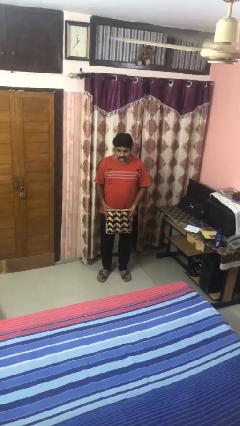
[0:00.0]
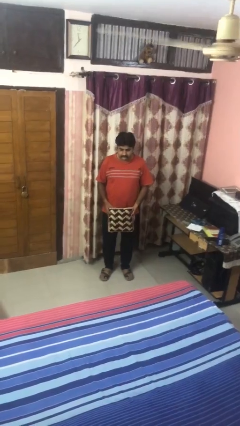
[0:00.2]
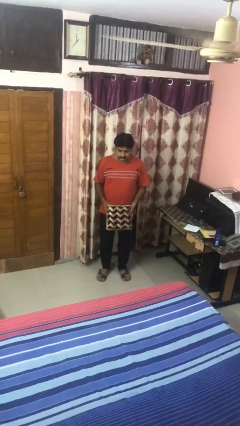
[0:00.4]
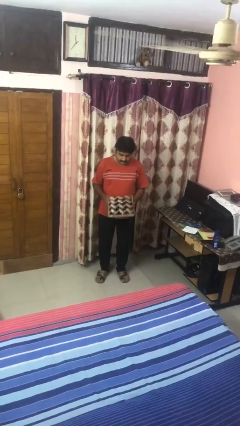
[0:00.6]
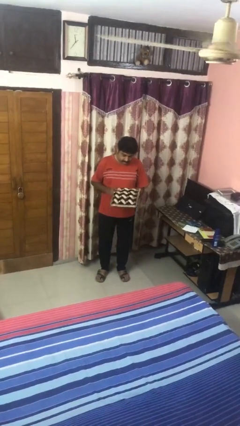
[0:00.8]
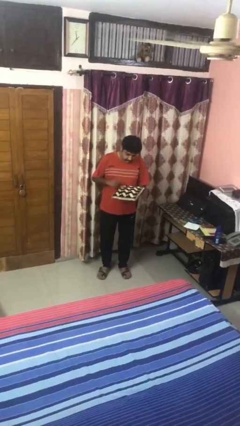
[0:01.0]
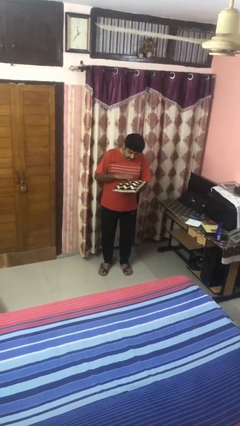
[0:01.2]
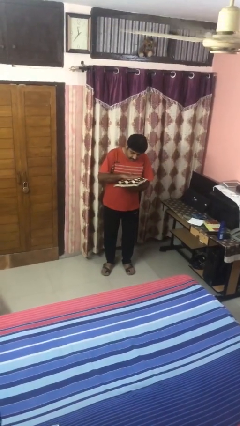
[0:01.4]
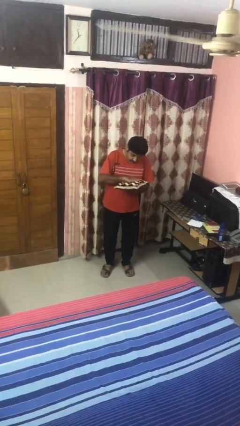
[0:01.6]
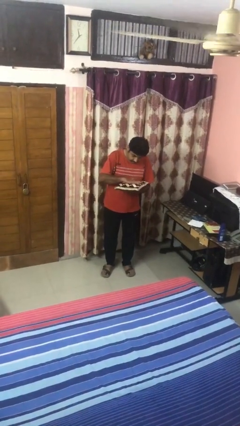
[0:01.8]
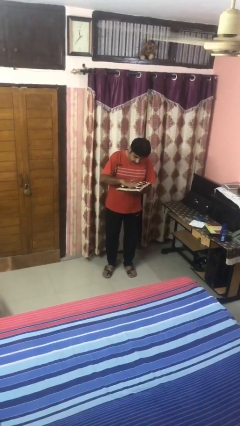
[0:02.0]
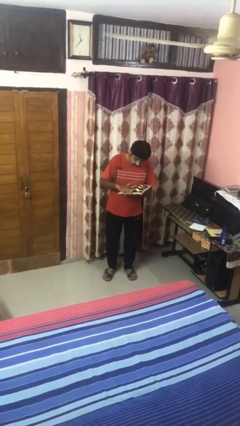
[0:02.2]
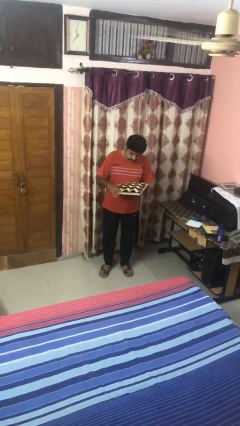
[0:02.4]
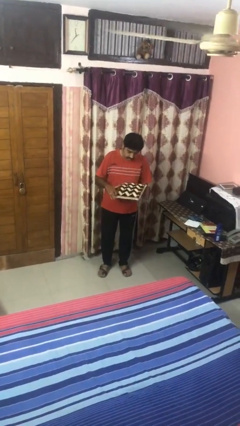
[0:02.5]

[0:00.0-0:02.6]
person waves hand over object

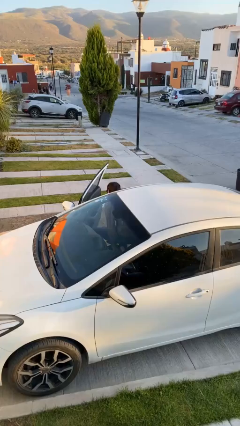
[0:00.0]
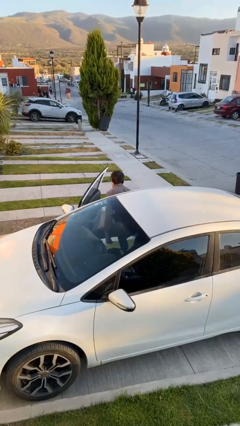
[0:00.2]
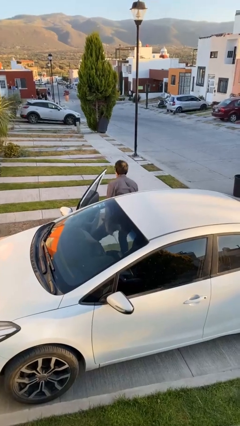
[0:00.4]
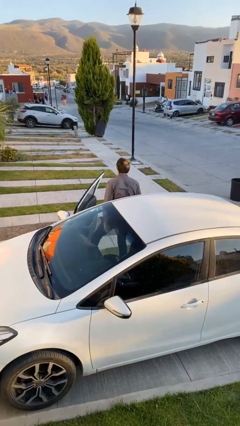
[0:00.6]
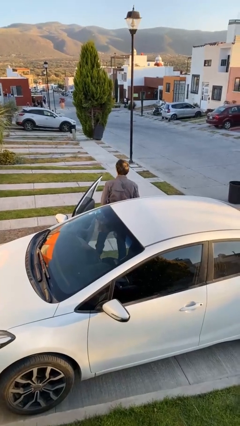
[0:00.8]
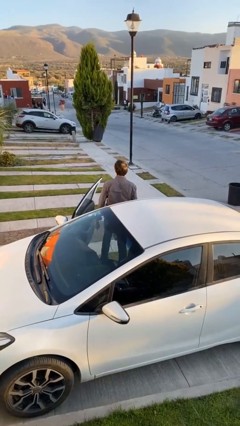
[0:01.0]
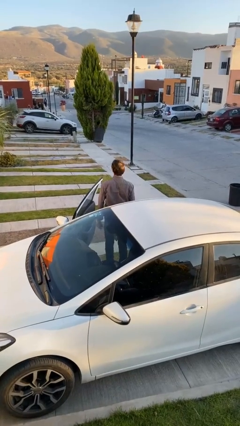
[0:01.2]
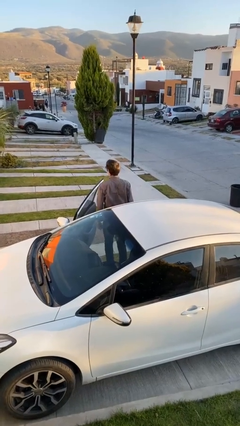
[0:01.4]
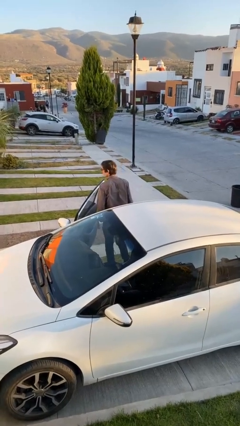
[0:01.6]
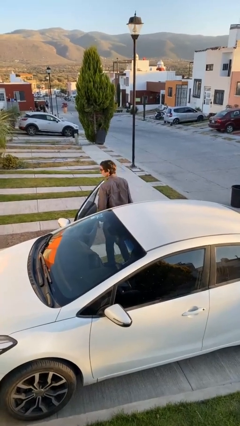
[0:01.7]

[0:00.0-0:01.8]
person exits car

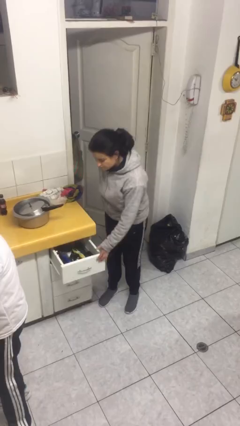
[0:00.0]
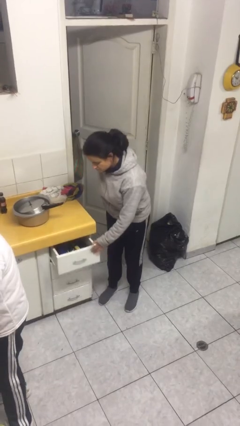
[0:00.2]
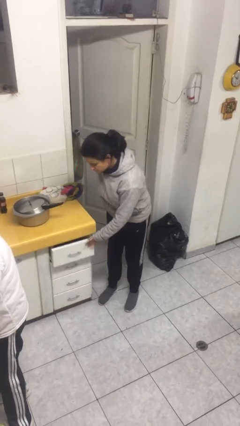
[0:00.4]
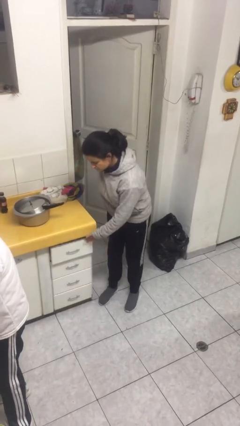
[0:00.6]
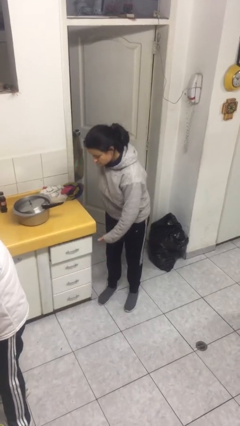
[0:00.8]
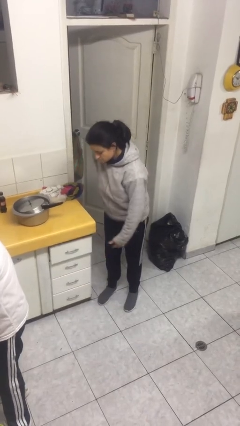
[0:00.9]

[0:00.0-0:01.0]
person closes kitchen drawer

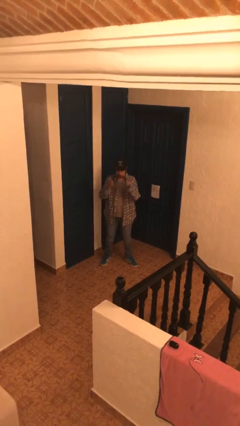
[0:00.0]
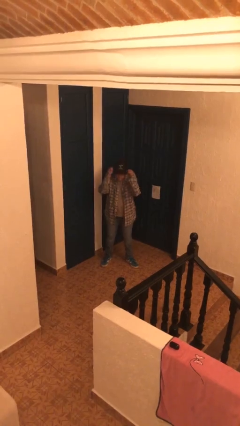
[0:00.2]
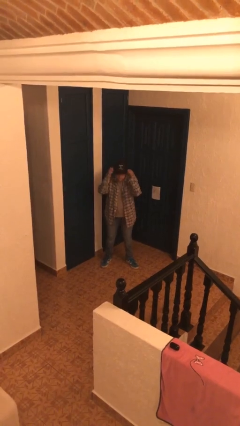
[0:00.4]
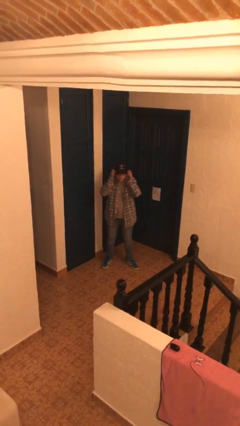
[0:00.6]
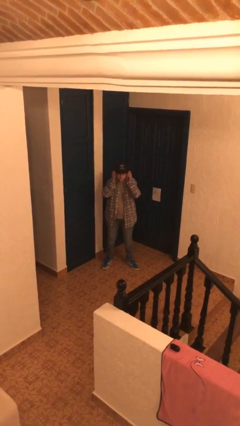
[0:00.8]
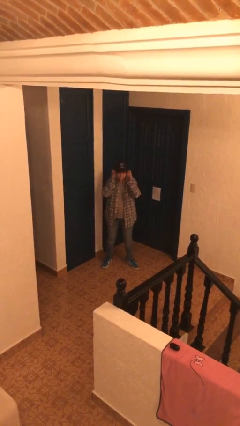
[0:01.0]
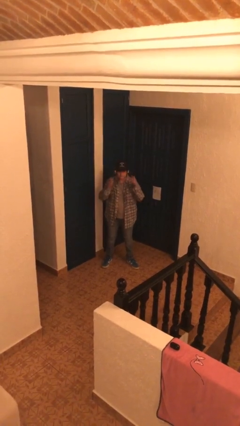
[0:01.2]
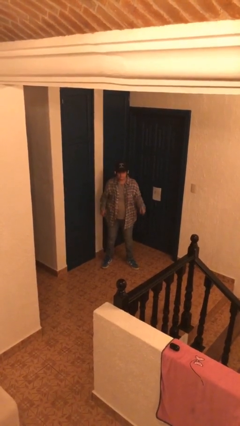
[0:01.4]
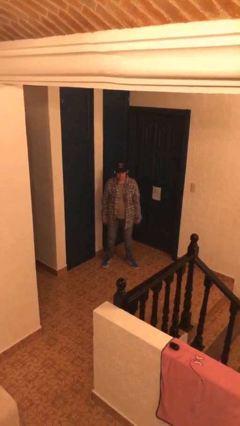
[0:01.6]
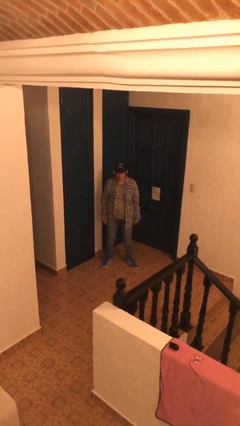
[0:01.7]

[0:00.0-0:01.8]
person puts on headphones

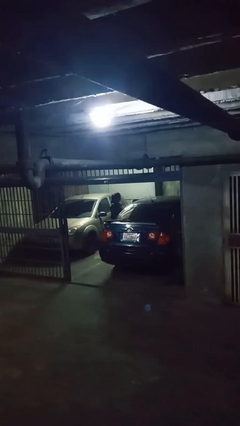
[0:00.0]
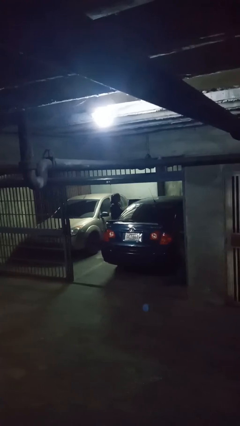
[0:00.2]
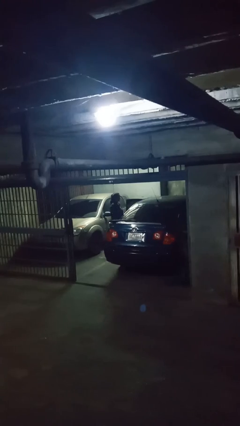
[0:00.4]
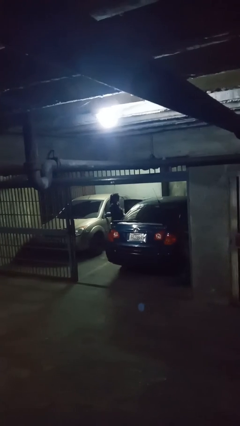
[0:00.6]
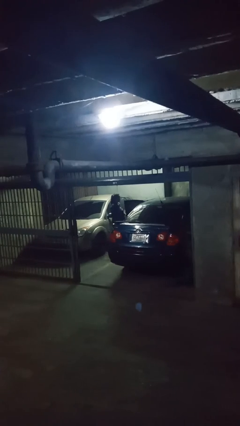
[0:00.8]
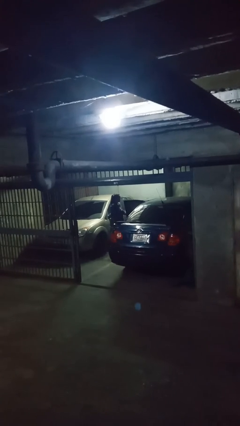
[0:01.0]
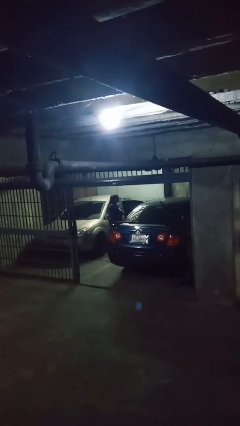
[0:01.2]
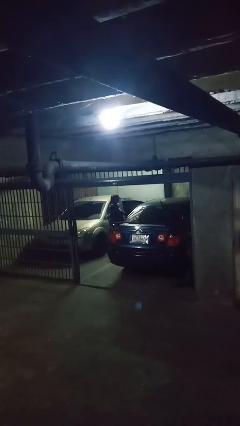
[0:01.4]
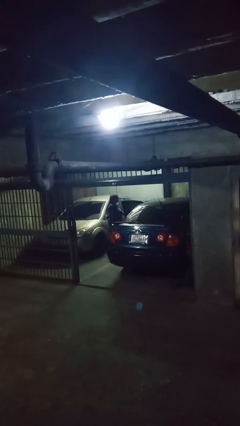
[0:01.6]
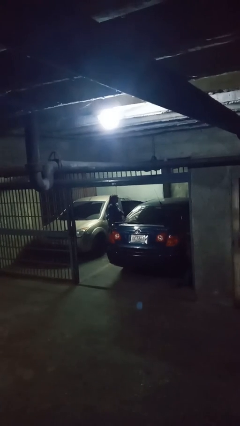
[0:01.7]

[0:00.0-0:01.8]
person opens car door

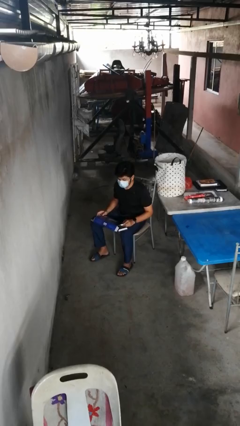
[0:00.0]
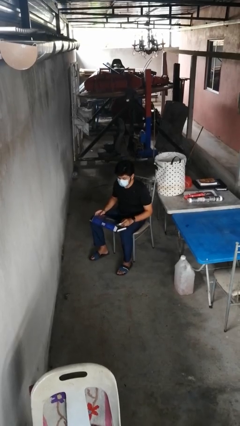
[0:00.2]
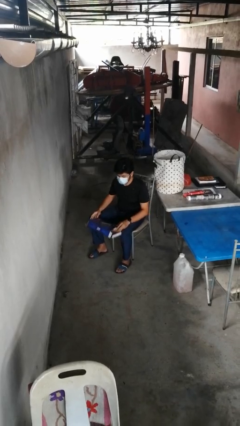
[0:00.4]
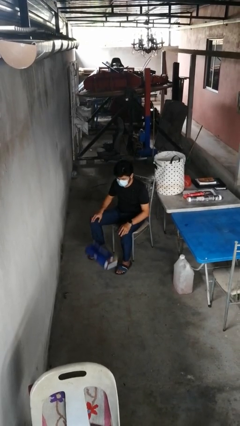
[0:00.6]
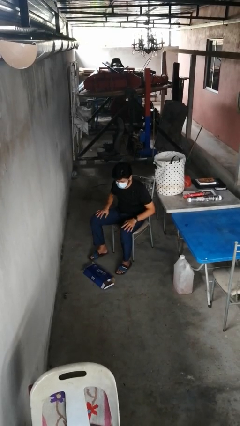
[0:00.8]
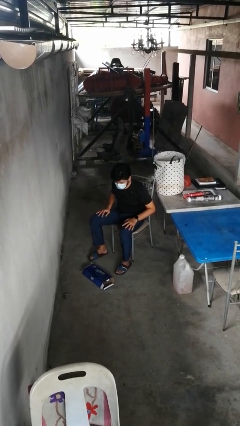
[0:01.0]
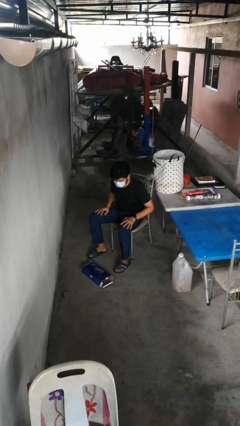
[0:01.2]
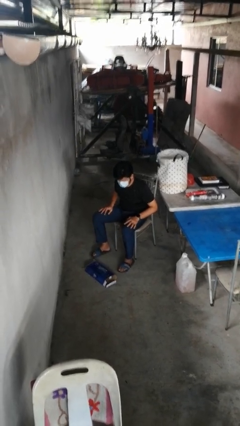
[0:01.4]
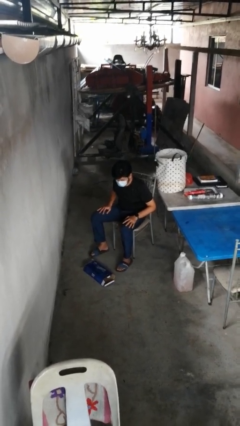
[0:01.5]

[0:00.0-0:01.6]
person drops object

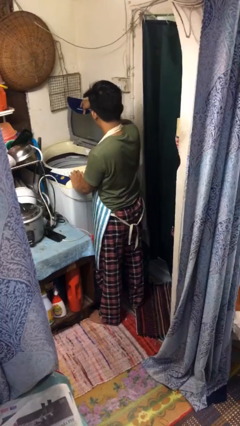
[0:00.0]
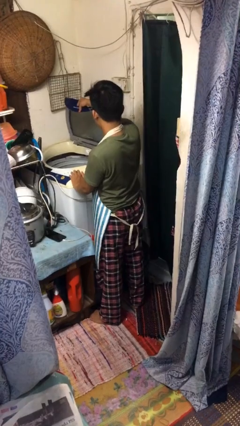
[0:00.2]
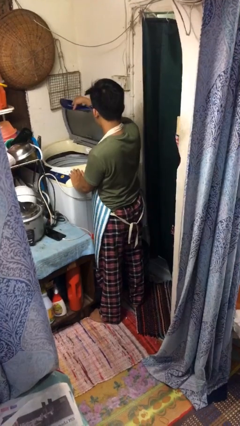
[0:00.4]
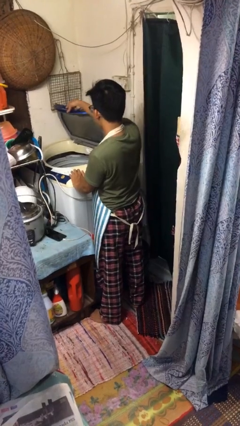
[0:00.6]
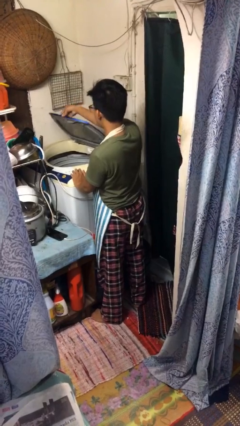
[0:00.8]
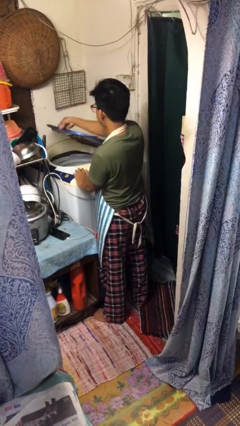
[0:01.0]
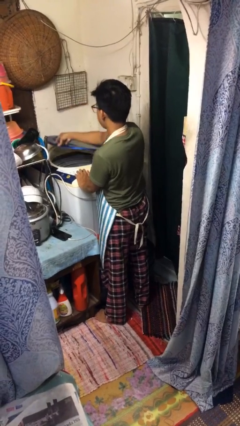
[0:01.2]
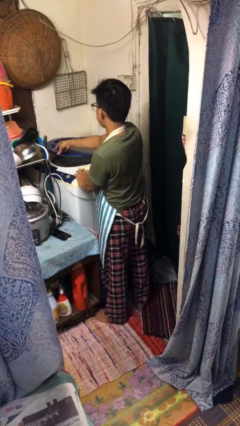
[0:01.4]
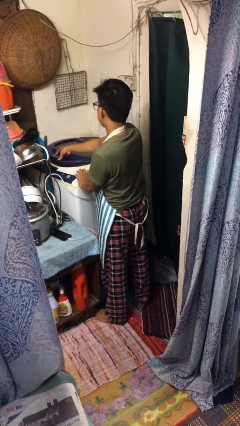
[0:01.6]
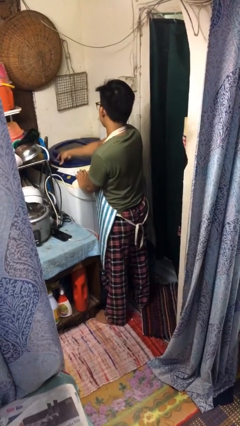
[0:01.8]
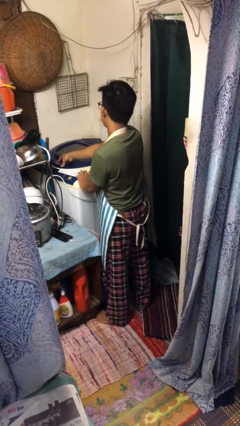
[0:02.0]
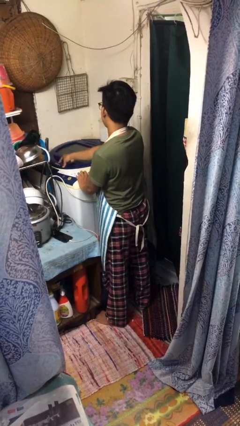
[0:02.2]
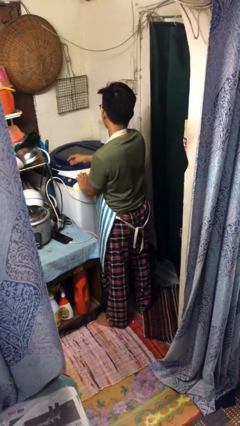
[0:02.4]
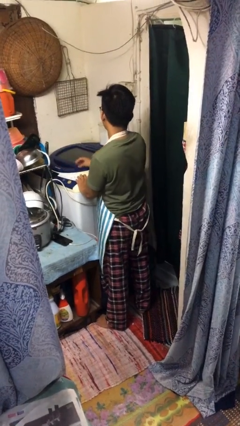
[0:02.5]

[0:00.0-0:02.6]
person closes clothes washer

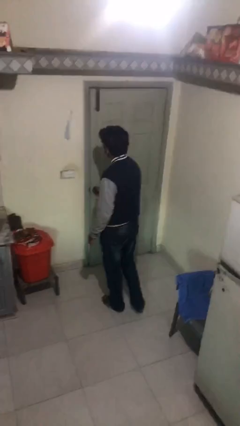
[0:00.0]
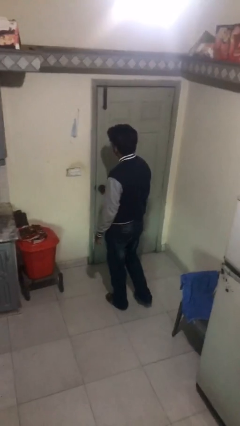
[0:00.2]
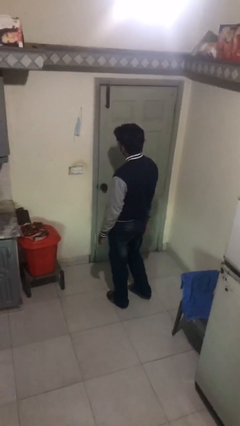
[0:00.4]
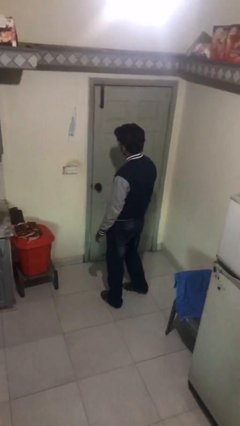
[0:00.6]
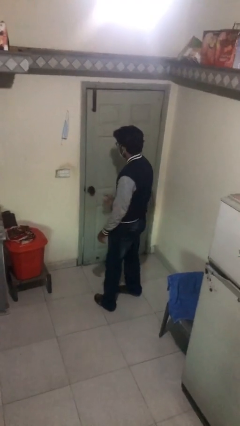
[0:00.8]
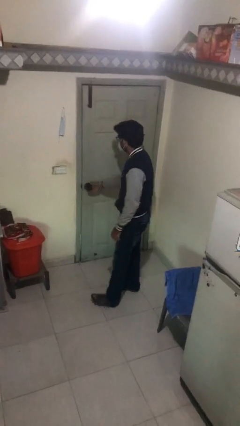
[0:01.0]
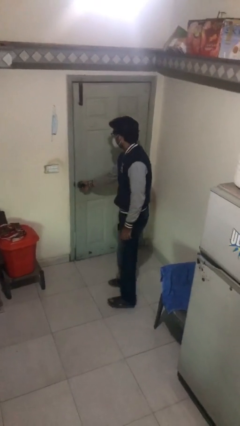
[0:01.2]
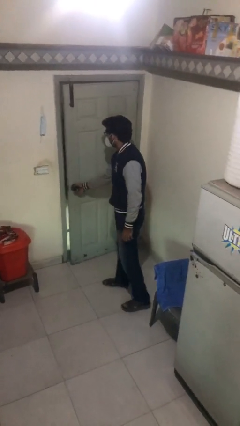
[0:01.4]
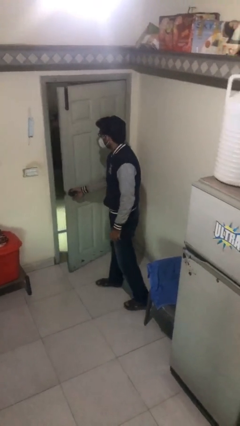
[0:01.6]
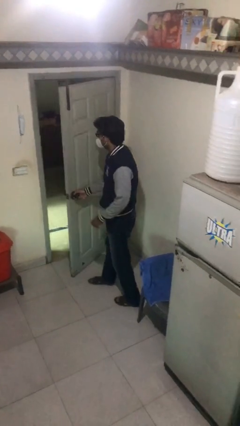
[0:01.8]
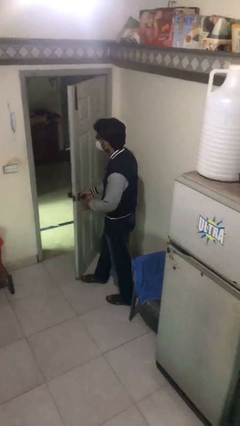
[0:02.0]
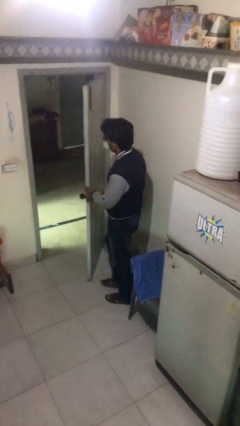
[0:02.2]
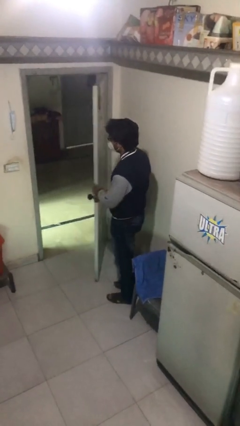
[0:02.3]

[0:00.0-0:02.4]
person opens facility door

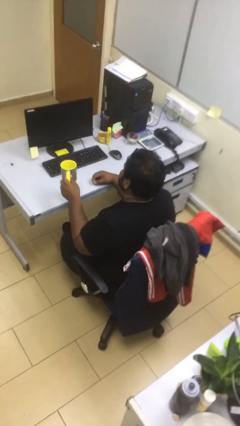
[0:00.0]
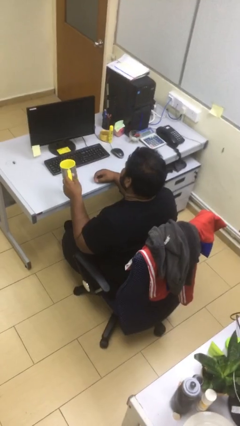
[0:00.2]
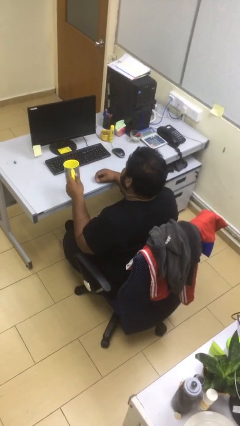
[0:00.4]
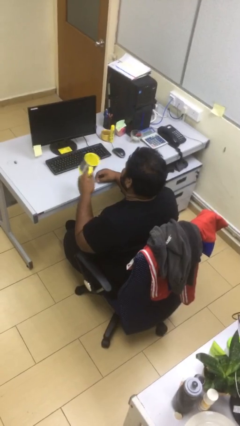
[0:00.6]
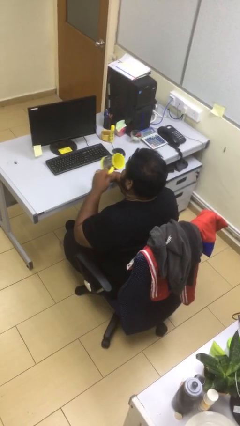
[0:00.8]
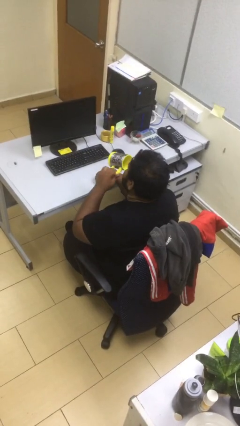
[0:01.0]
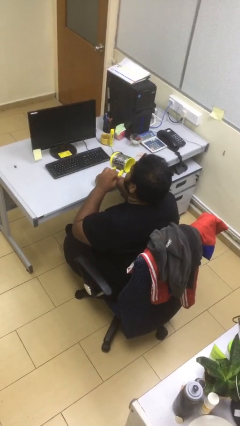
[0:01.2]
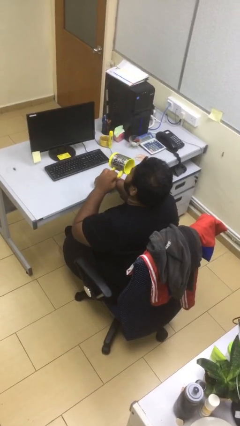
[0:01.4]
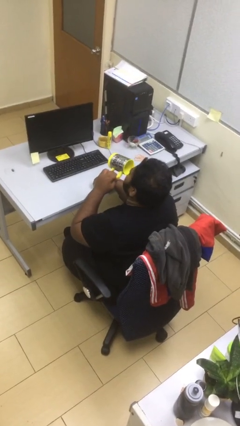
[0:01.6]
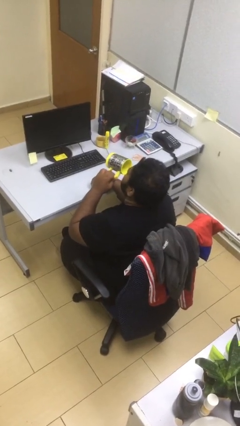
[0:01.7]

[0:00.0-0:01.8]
person drinks from mug
